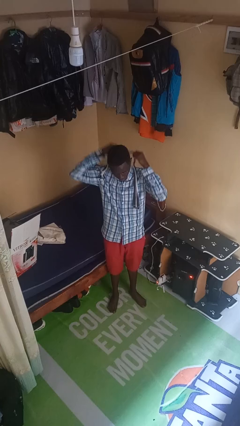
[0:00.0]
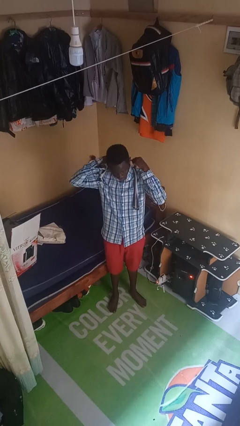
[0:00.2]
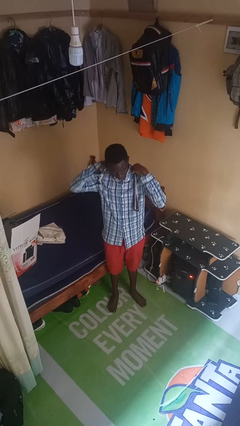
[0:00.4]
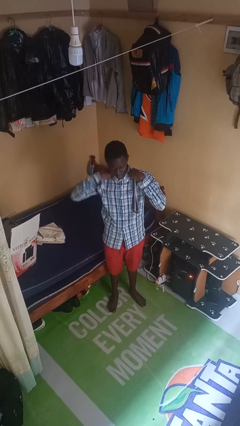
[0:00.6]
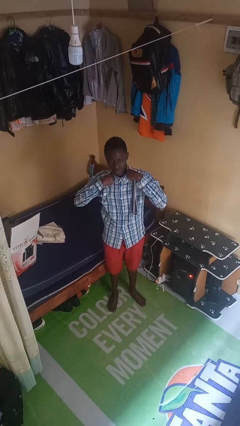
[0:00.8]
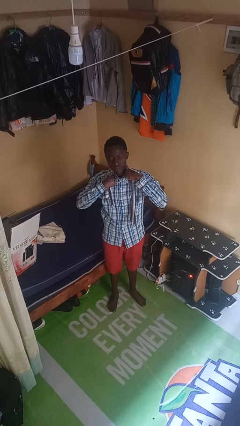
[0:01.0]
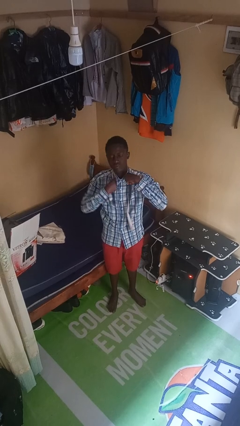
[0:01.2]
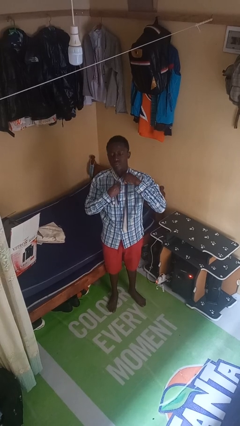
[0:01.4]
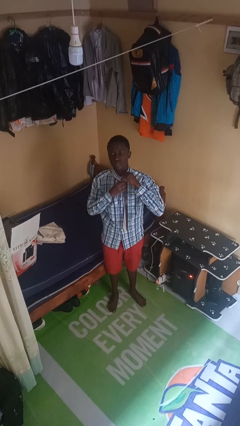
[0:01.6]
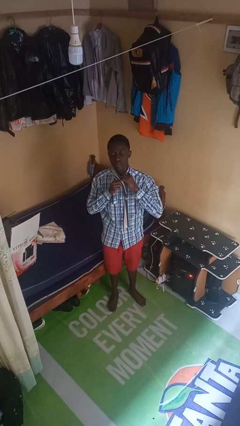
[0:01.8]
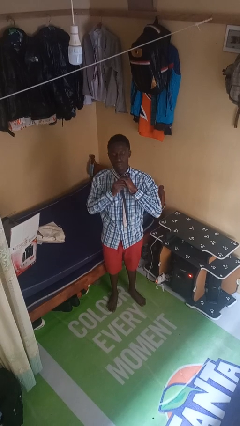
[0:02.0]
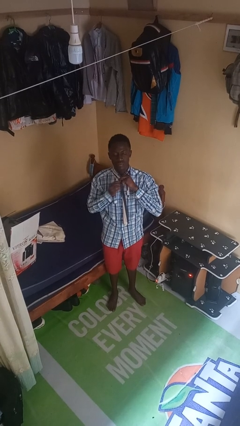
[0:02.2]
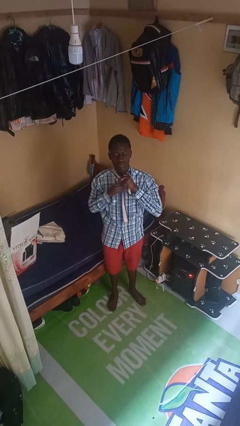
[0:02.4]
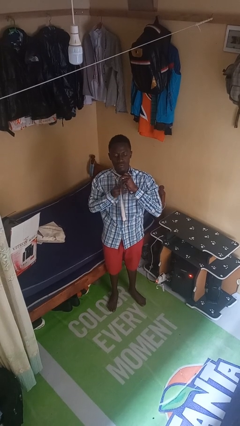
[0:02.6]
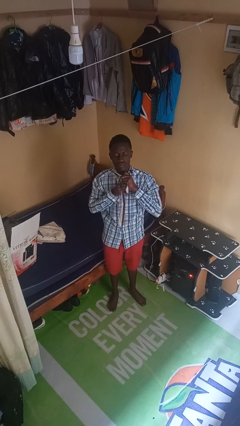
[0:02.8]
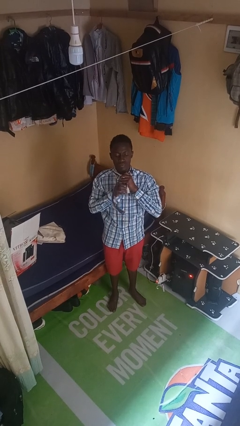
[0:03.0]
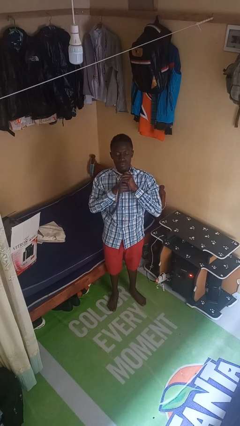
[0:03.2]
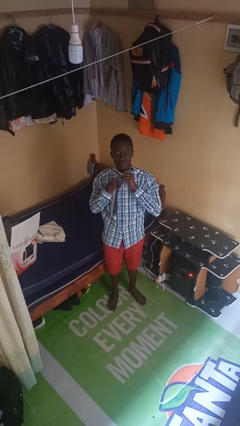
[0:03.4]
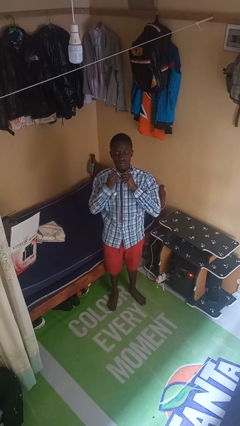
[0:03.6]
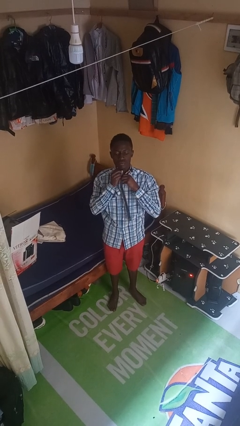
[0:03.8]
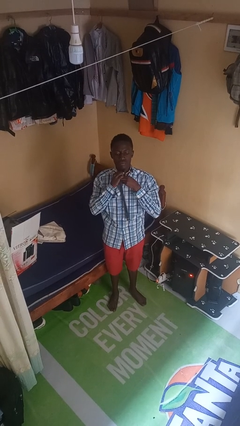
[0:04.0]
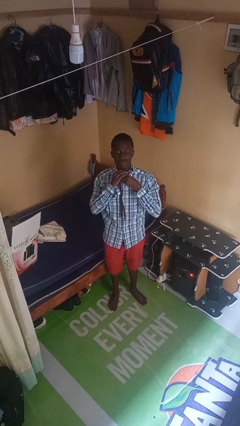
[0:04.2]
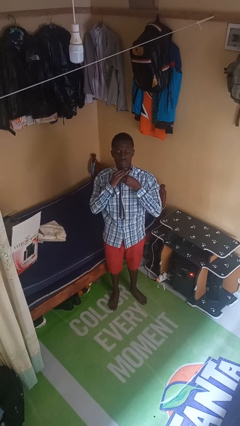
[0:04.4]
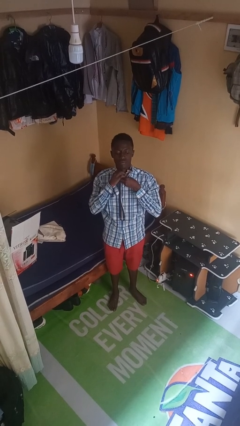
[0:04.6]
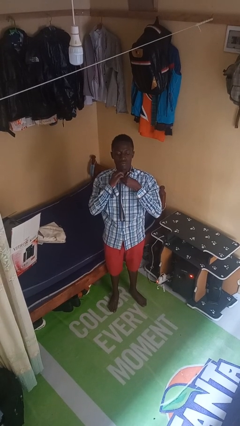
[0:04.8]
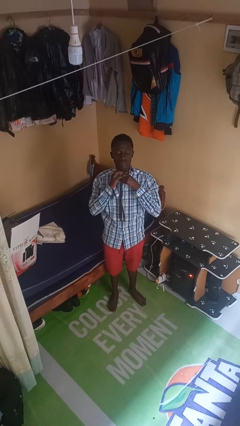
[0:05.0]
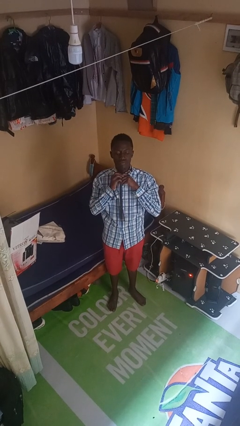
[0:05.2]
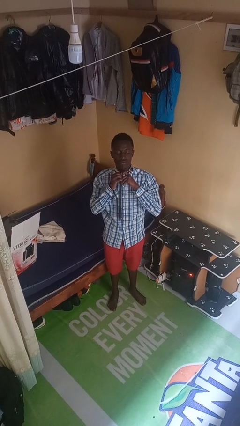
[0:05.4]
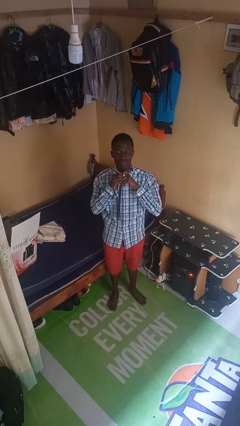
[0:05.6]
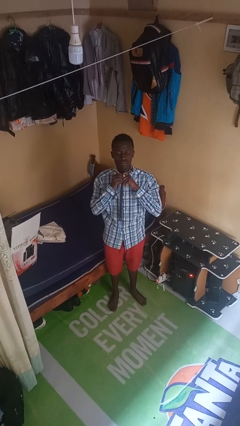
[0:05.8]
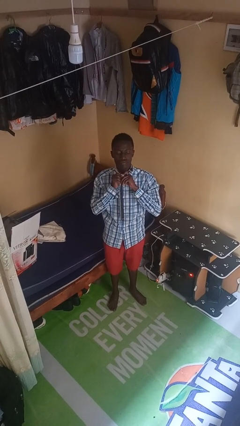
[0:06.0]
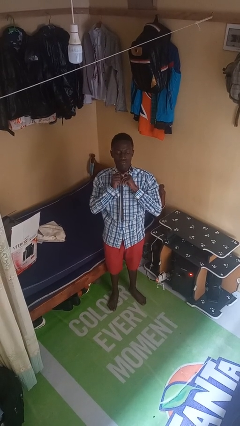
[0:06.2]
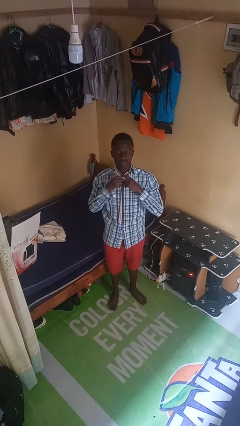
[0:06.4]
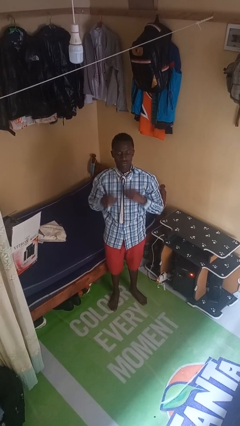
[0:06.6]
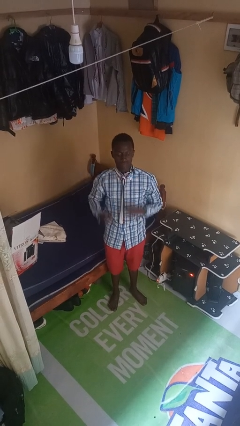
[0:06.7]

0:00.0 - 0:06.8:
person puts on necktie

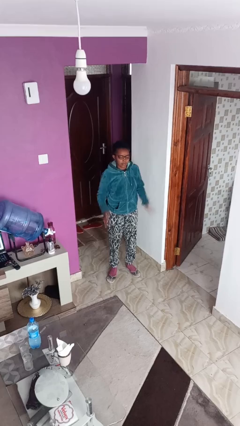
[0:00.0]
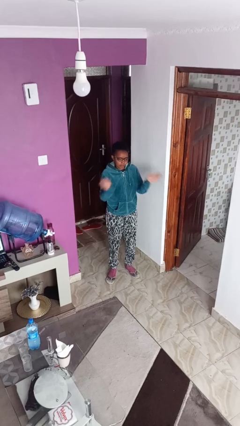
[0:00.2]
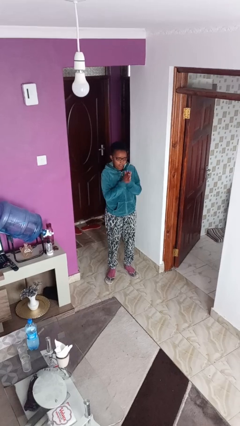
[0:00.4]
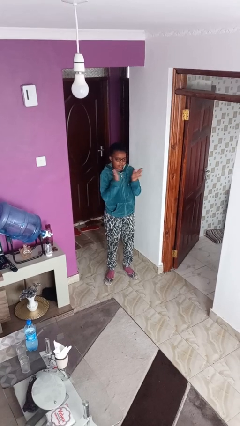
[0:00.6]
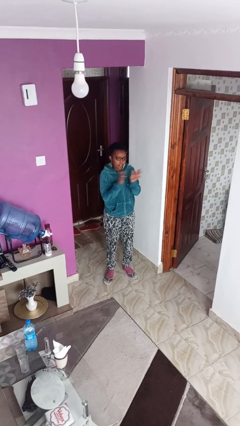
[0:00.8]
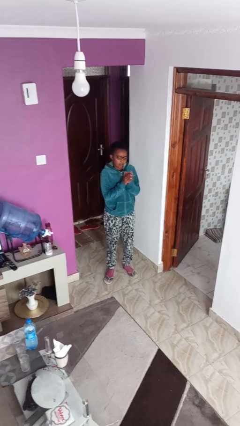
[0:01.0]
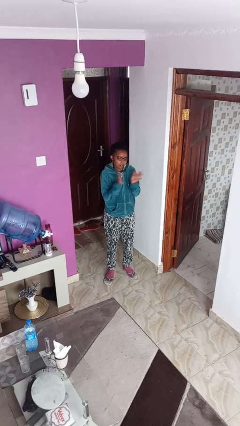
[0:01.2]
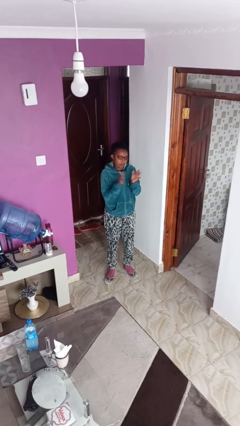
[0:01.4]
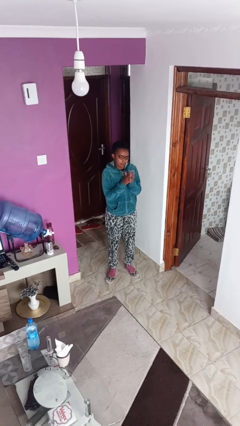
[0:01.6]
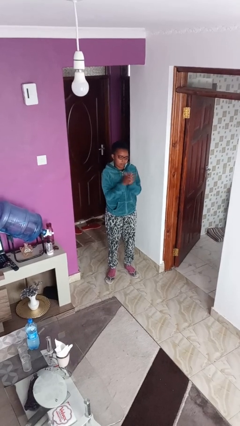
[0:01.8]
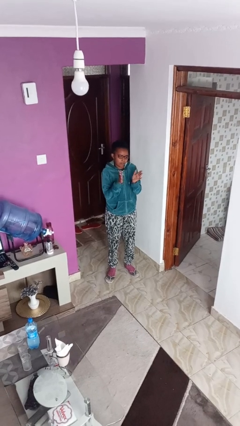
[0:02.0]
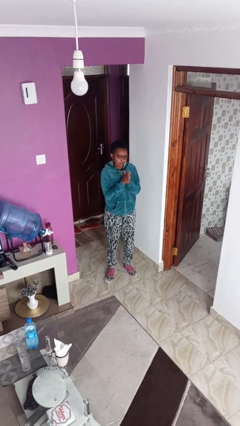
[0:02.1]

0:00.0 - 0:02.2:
person claps hands

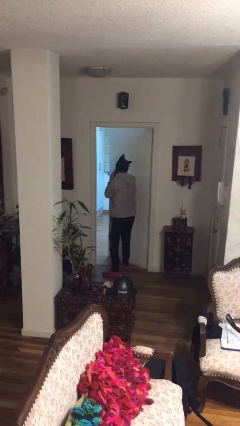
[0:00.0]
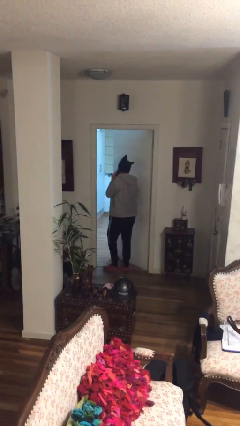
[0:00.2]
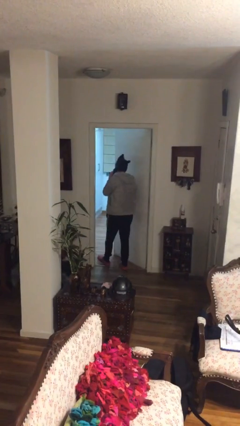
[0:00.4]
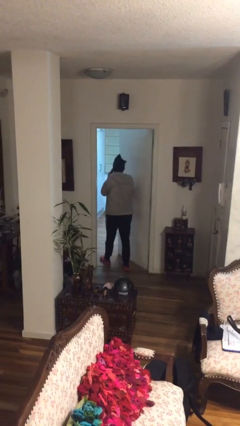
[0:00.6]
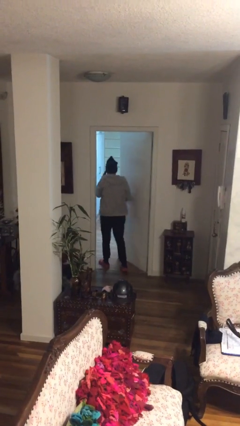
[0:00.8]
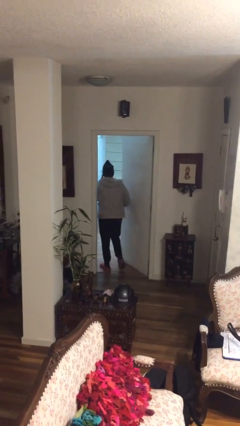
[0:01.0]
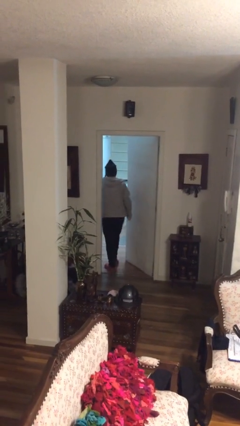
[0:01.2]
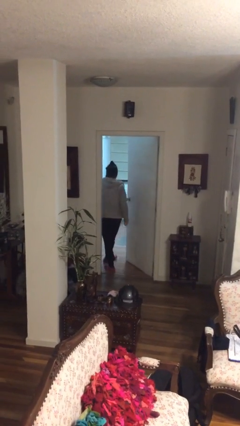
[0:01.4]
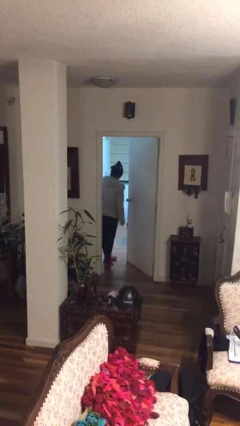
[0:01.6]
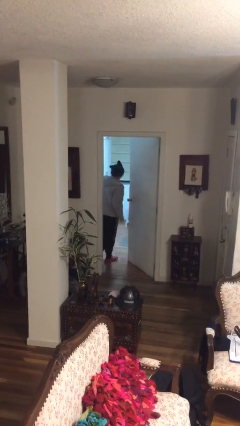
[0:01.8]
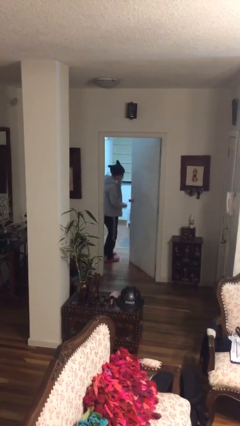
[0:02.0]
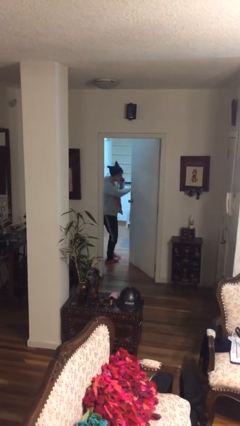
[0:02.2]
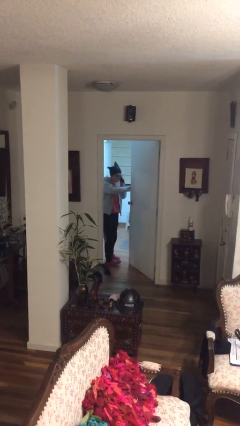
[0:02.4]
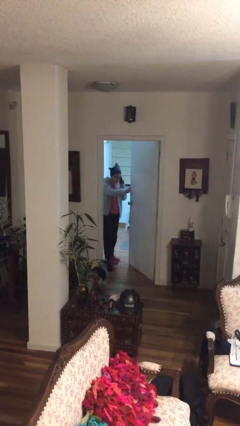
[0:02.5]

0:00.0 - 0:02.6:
person exits scene through structure

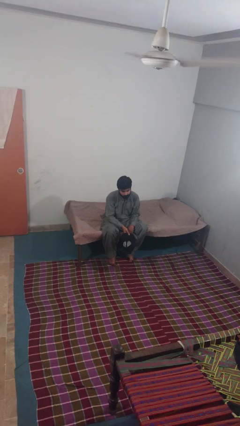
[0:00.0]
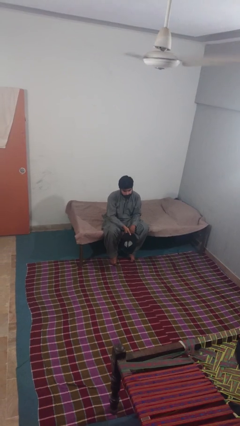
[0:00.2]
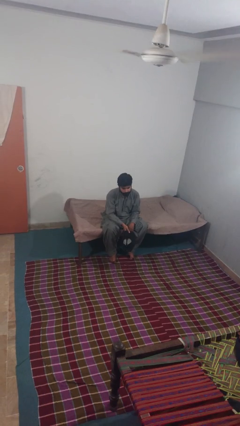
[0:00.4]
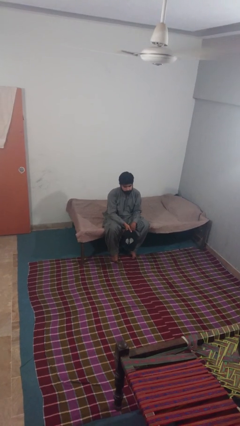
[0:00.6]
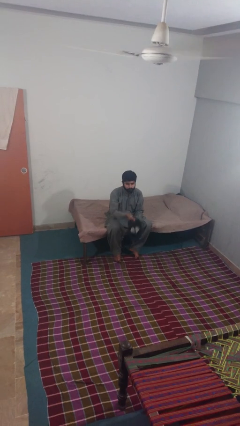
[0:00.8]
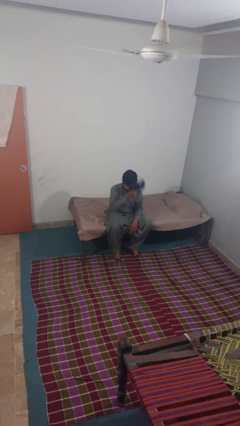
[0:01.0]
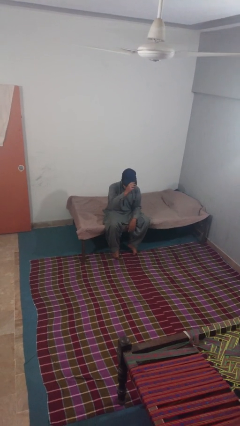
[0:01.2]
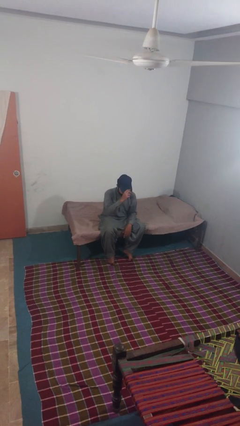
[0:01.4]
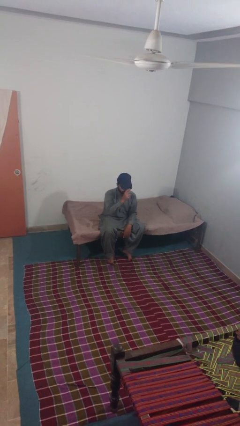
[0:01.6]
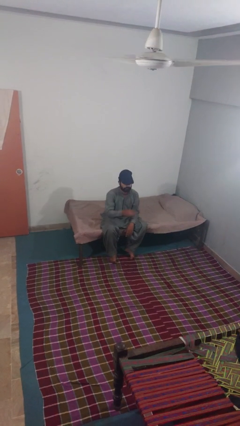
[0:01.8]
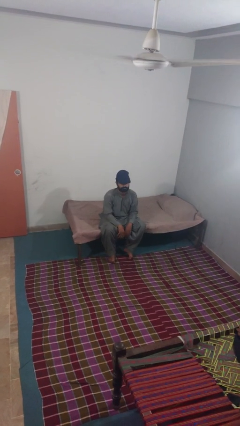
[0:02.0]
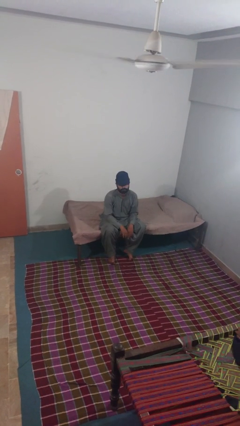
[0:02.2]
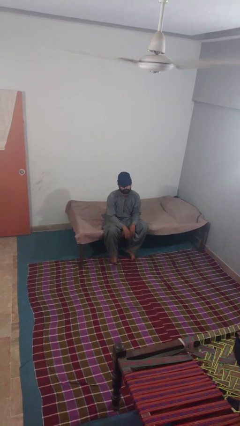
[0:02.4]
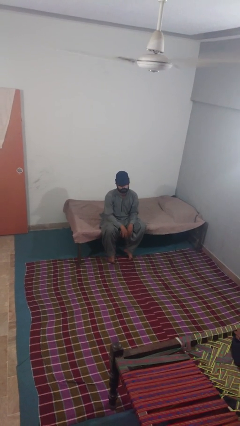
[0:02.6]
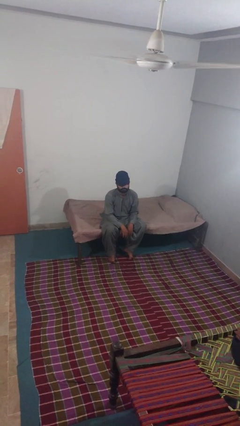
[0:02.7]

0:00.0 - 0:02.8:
person puts on hat

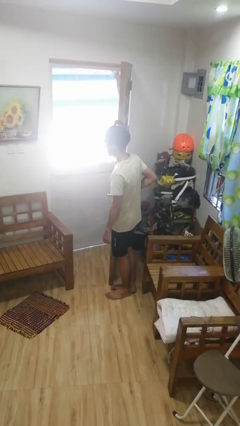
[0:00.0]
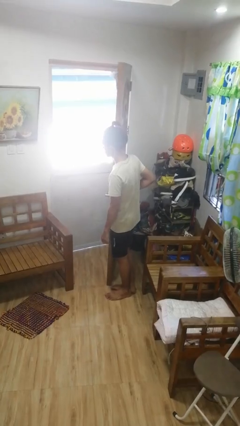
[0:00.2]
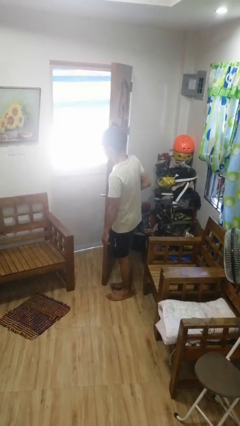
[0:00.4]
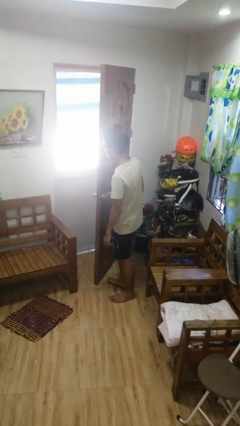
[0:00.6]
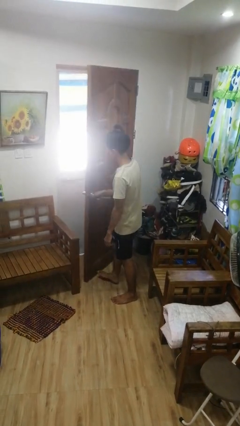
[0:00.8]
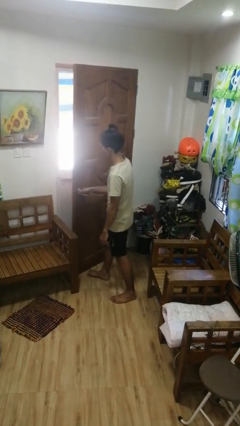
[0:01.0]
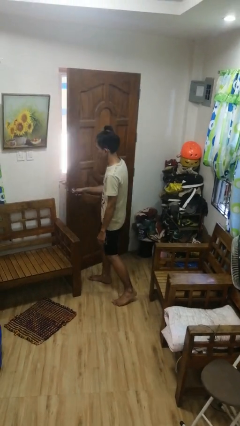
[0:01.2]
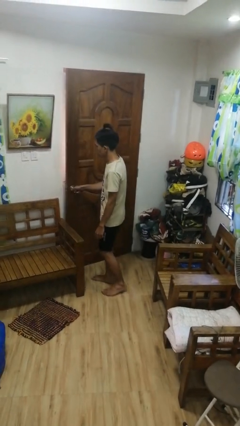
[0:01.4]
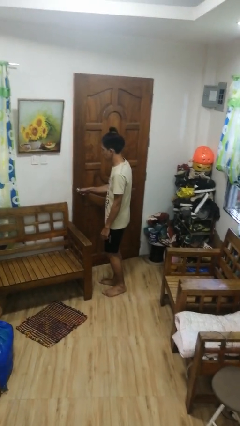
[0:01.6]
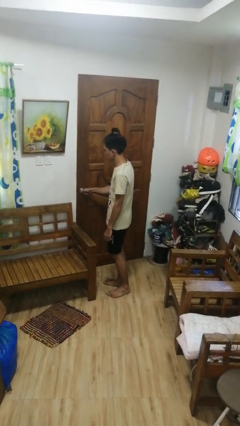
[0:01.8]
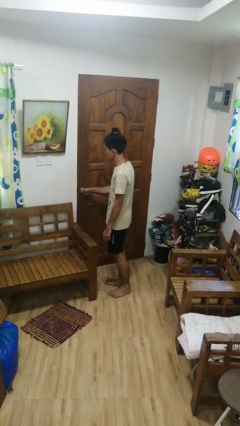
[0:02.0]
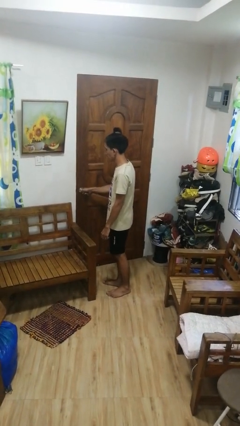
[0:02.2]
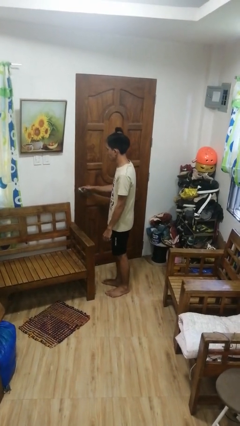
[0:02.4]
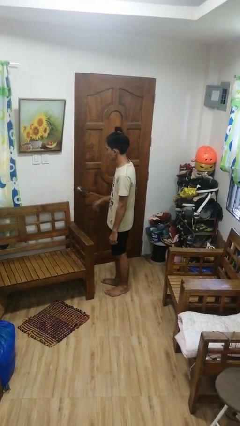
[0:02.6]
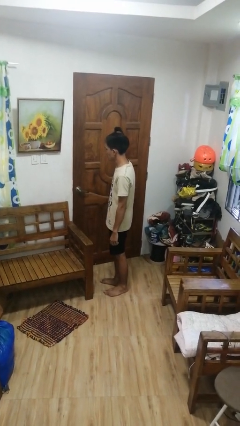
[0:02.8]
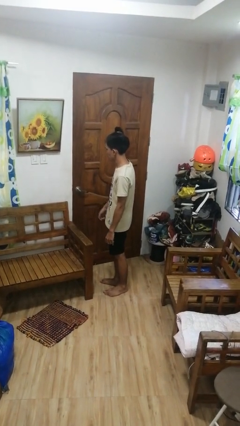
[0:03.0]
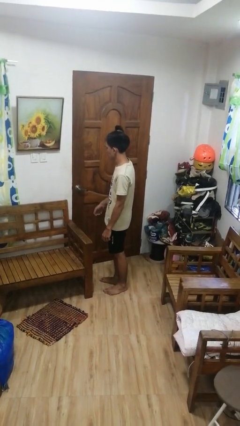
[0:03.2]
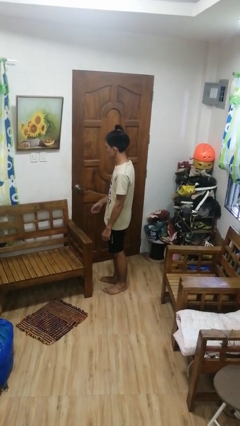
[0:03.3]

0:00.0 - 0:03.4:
person closes facility door
